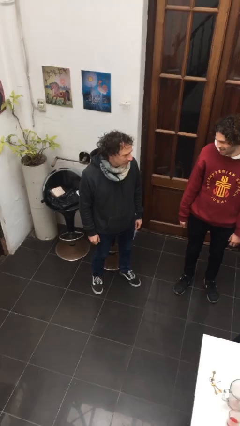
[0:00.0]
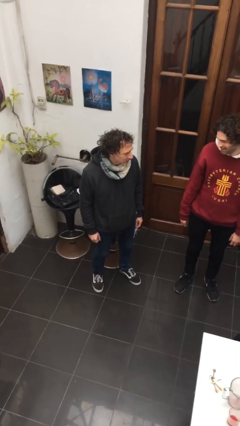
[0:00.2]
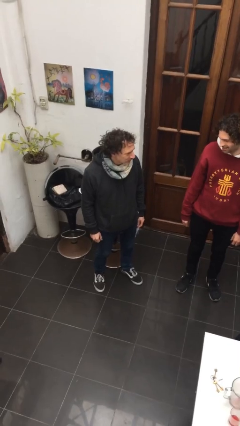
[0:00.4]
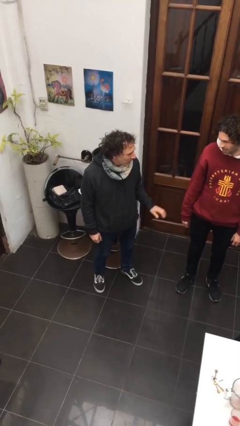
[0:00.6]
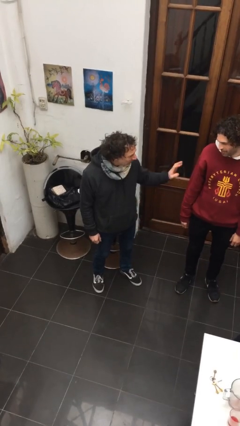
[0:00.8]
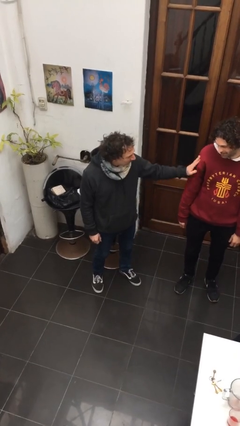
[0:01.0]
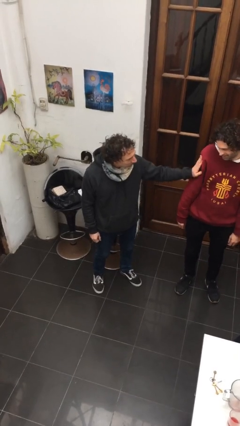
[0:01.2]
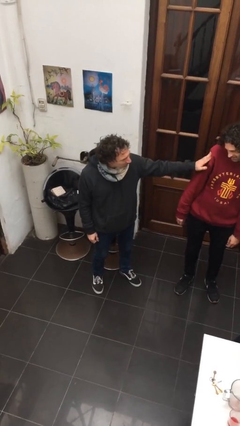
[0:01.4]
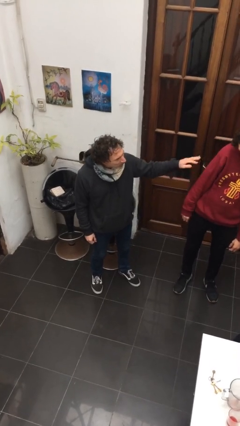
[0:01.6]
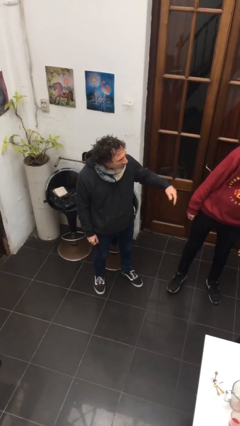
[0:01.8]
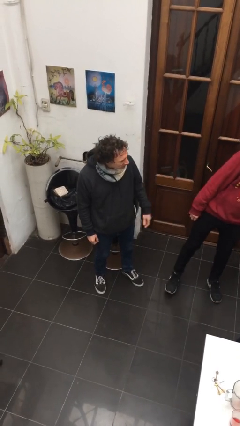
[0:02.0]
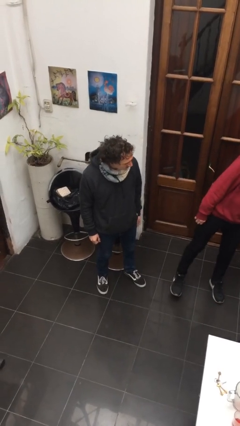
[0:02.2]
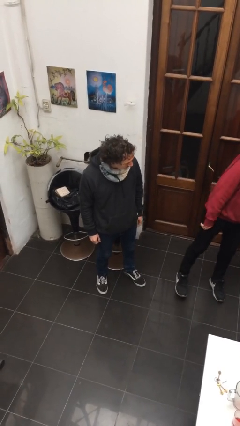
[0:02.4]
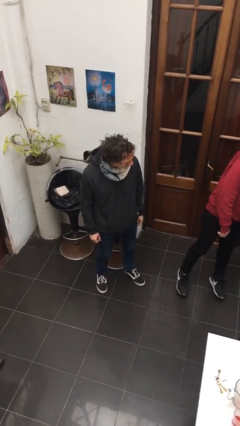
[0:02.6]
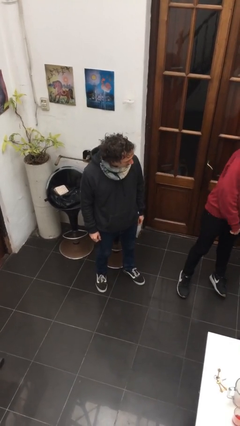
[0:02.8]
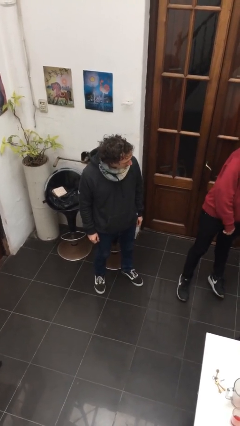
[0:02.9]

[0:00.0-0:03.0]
person shoves person

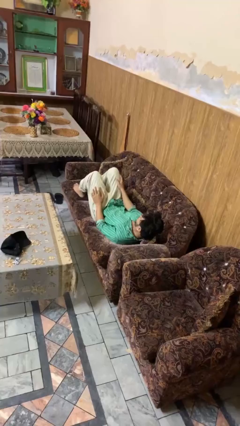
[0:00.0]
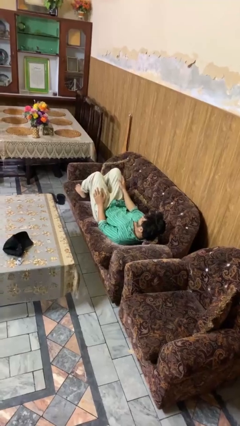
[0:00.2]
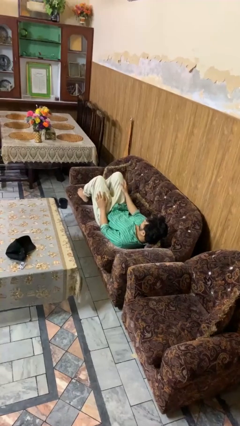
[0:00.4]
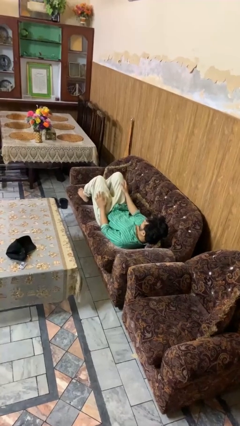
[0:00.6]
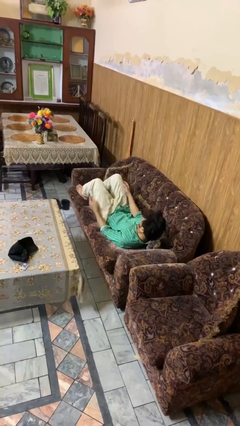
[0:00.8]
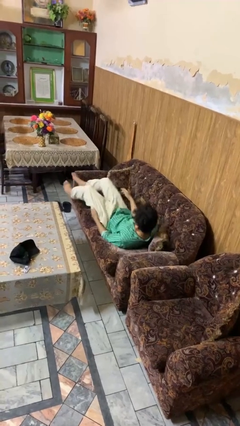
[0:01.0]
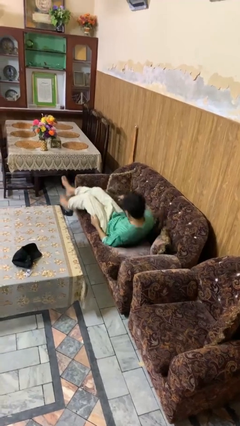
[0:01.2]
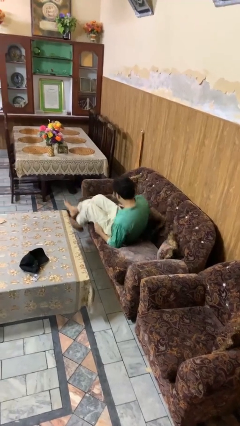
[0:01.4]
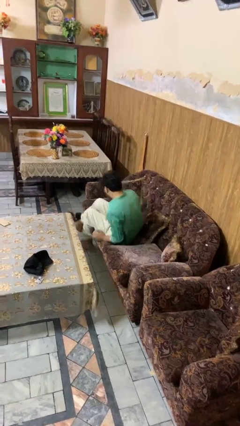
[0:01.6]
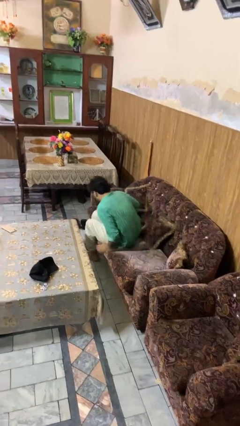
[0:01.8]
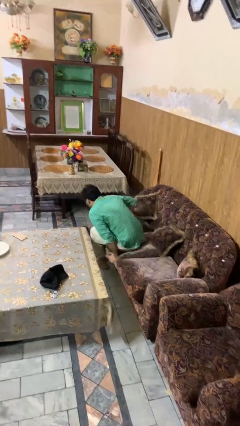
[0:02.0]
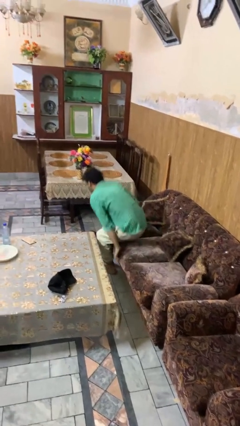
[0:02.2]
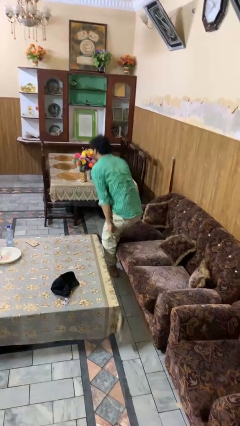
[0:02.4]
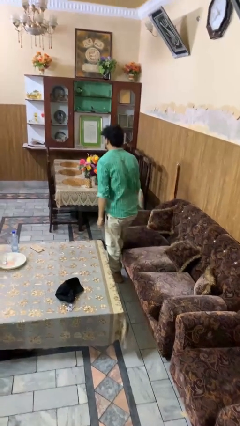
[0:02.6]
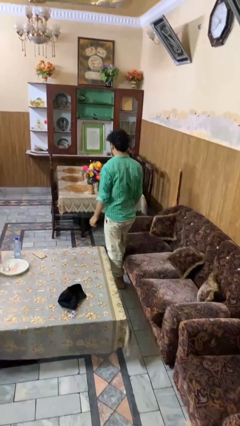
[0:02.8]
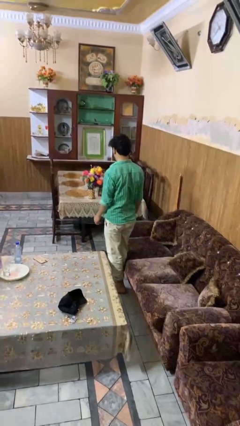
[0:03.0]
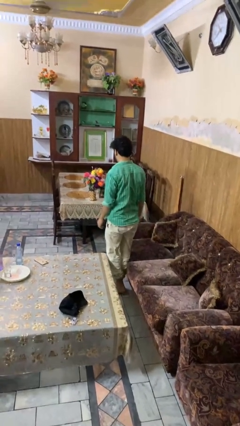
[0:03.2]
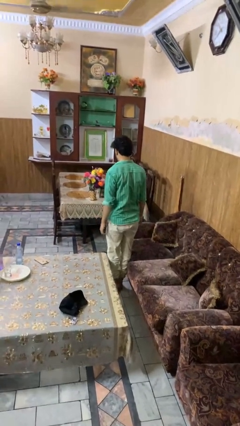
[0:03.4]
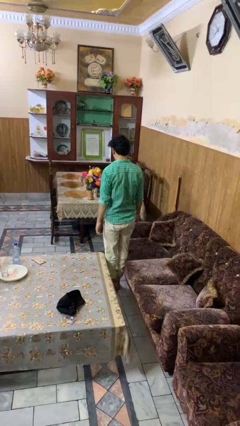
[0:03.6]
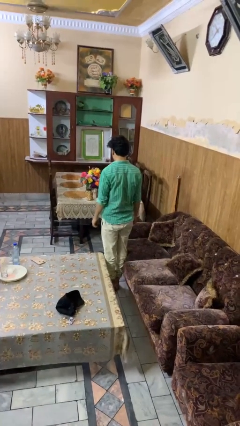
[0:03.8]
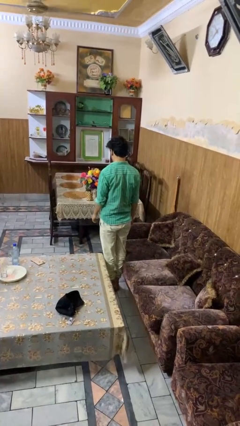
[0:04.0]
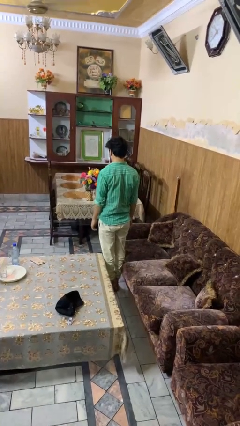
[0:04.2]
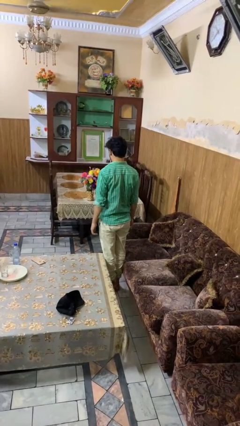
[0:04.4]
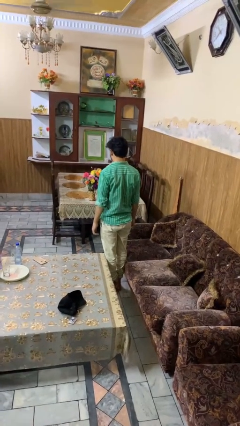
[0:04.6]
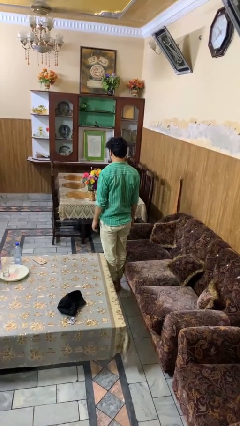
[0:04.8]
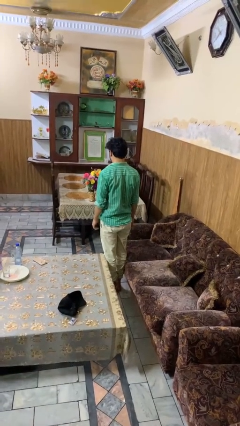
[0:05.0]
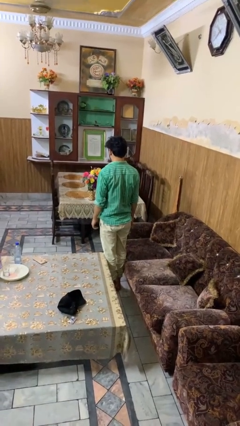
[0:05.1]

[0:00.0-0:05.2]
person stands up

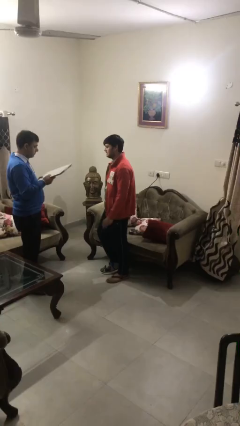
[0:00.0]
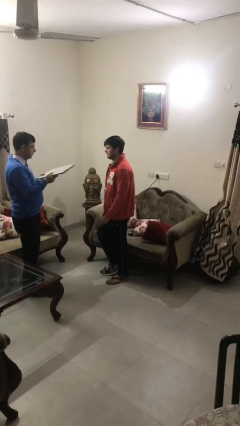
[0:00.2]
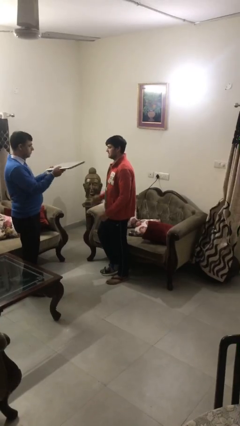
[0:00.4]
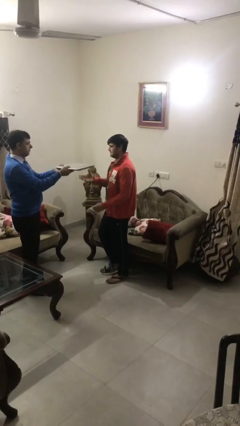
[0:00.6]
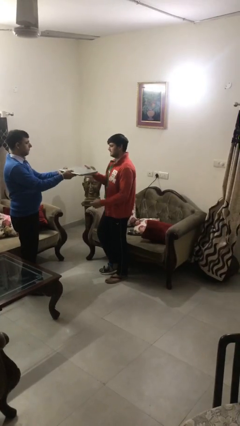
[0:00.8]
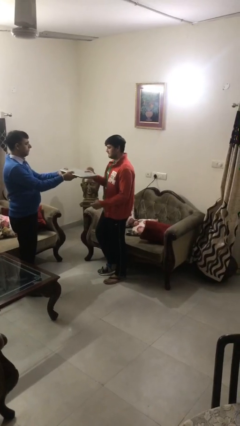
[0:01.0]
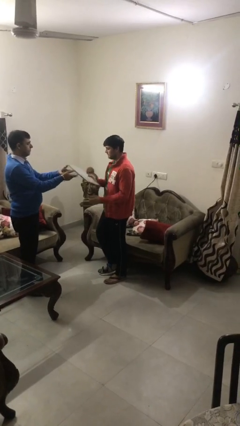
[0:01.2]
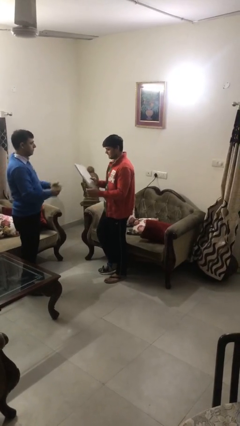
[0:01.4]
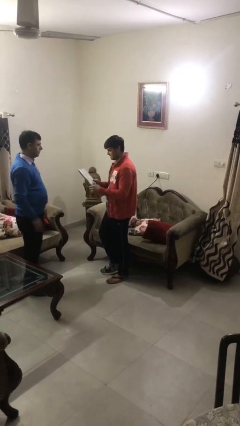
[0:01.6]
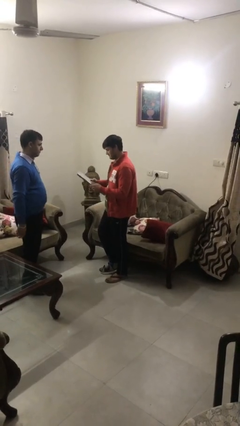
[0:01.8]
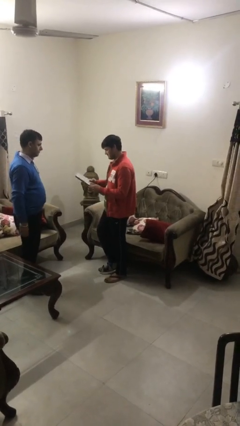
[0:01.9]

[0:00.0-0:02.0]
person transfers object to person

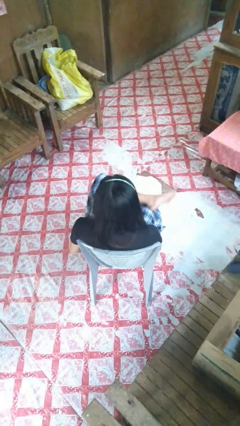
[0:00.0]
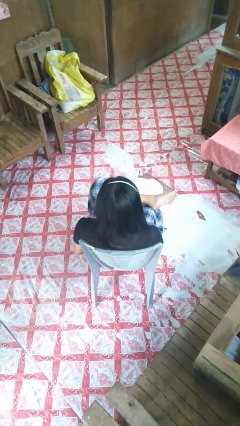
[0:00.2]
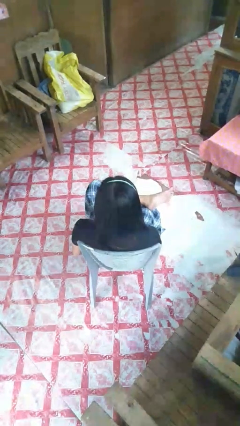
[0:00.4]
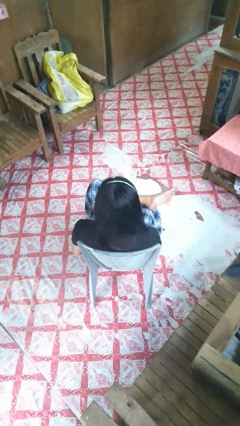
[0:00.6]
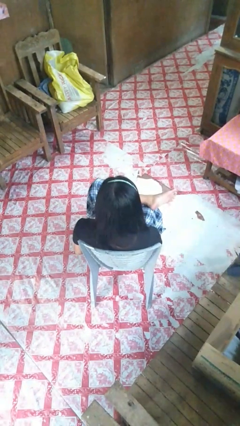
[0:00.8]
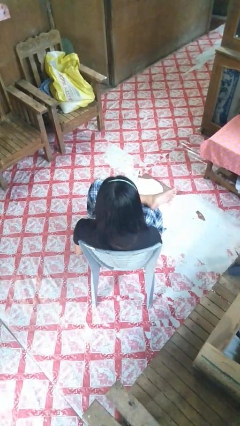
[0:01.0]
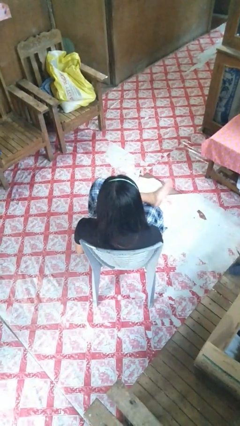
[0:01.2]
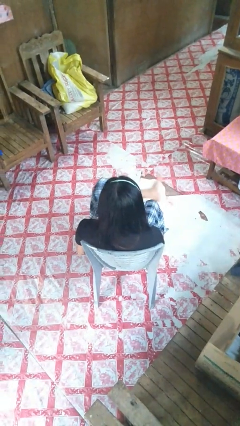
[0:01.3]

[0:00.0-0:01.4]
person crosses legs

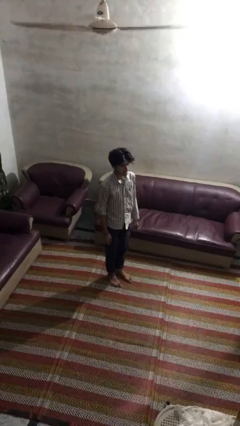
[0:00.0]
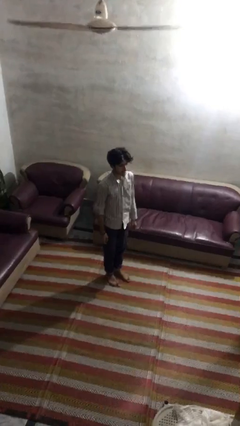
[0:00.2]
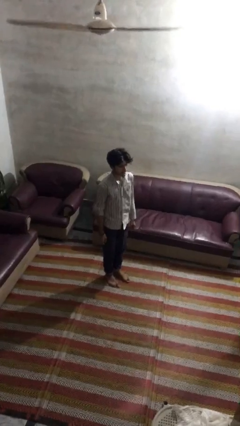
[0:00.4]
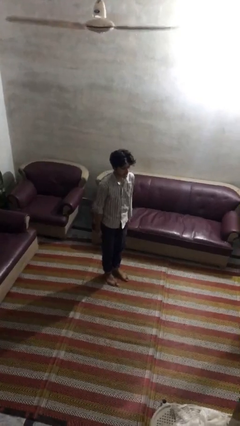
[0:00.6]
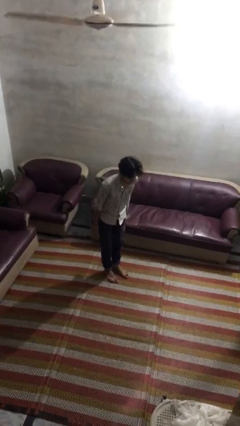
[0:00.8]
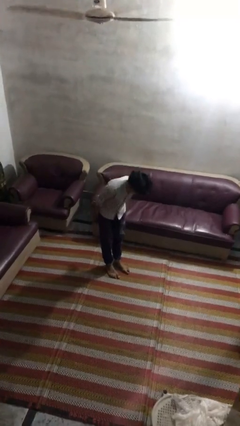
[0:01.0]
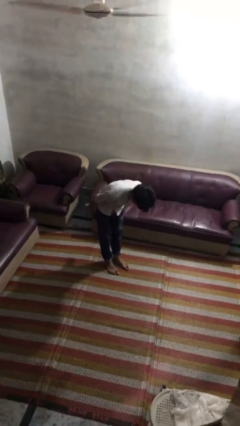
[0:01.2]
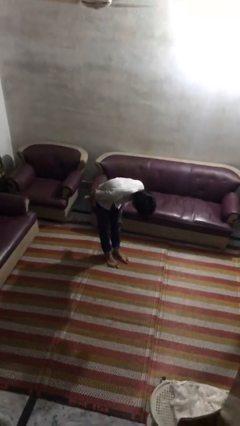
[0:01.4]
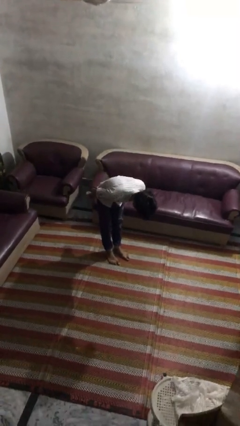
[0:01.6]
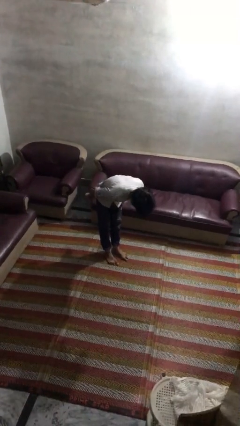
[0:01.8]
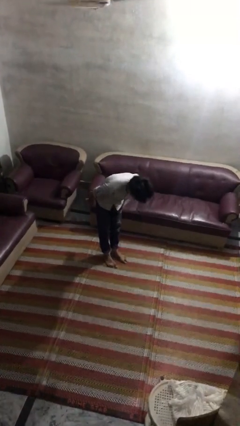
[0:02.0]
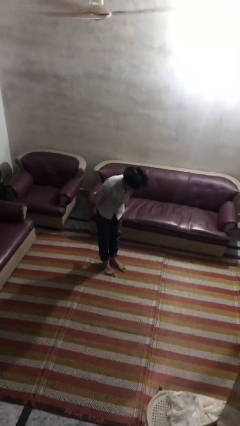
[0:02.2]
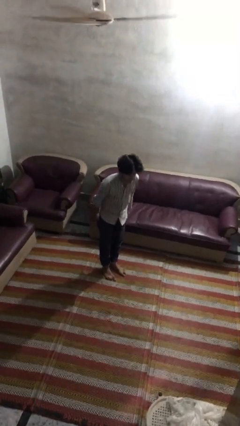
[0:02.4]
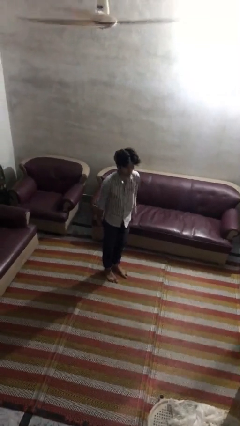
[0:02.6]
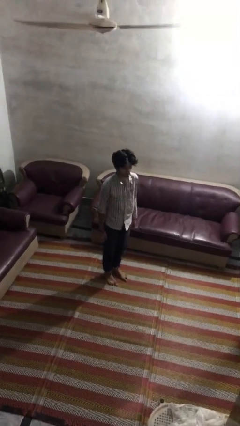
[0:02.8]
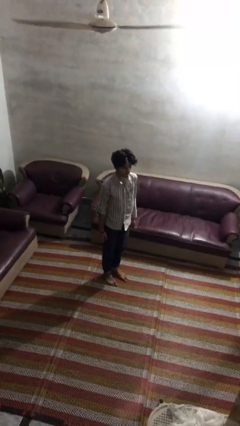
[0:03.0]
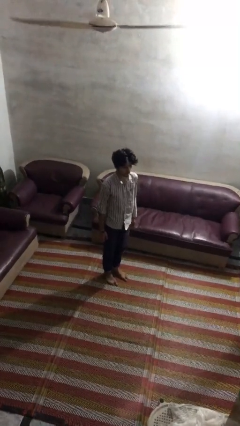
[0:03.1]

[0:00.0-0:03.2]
person bows

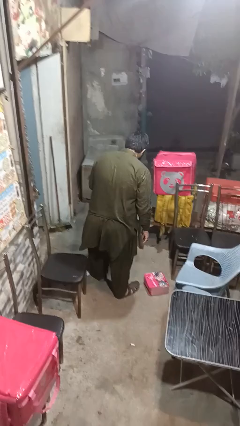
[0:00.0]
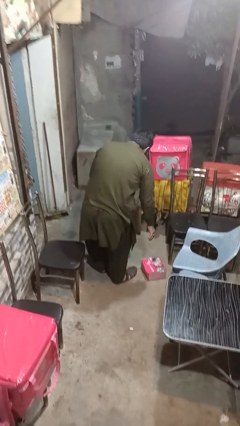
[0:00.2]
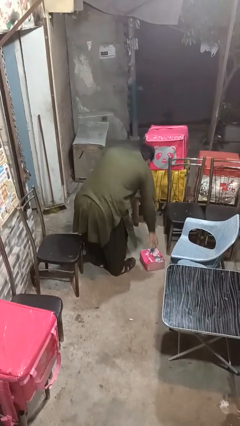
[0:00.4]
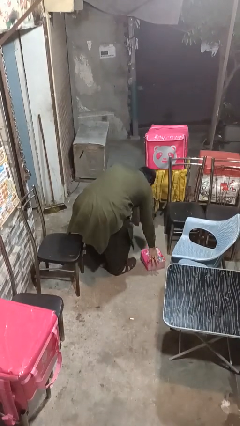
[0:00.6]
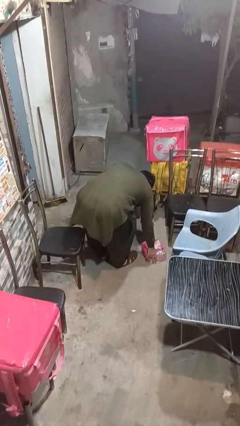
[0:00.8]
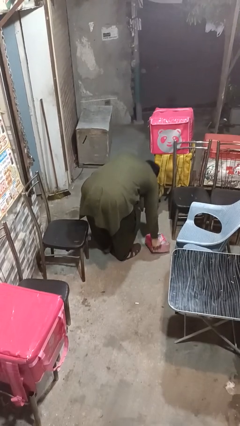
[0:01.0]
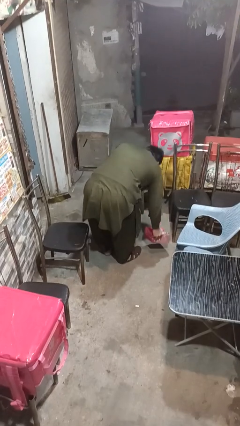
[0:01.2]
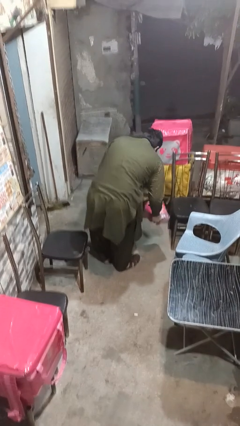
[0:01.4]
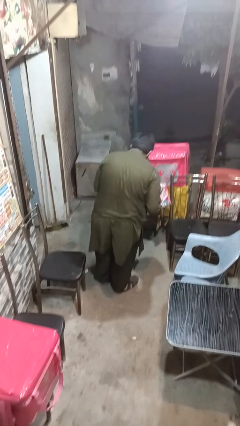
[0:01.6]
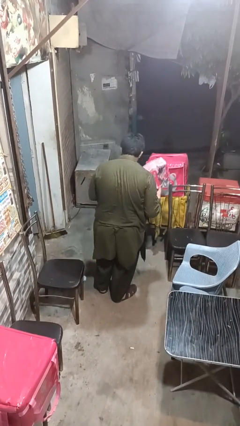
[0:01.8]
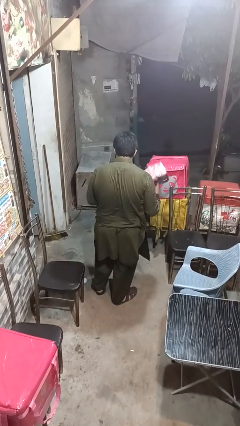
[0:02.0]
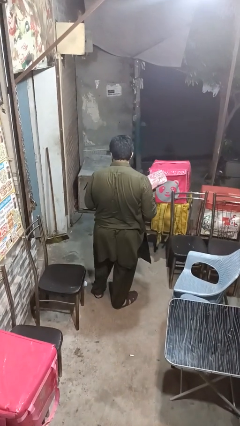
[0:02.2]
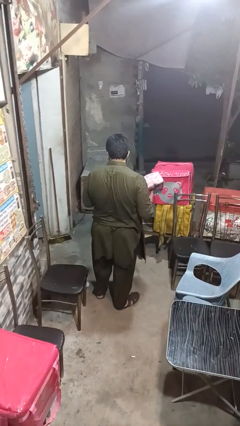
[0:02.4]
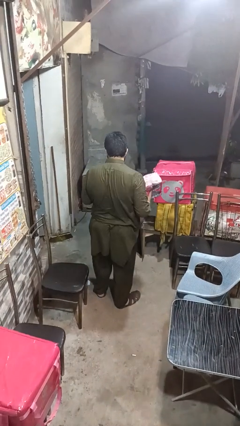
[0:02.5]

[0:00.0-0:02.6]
person picks up object from floor

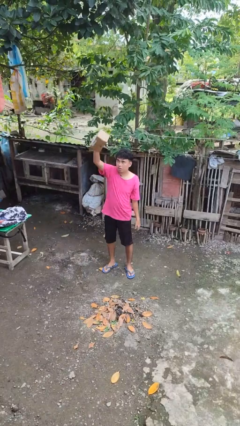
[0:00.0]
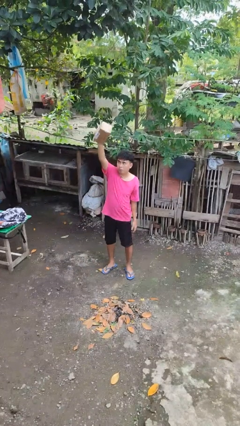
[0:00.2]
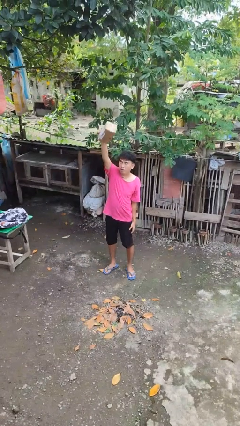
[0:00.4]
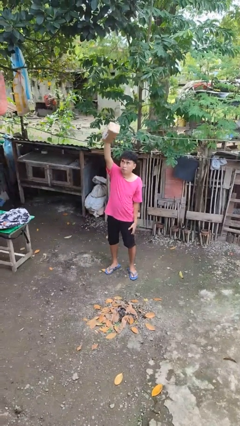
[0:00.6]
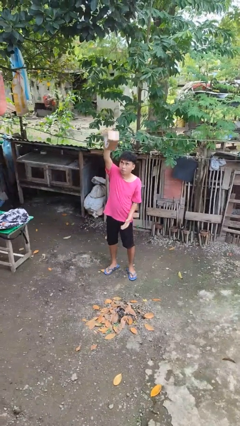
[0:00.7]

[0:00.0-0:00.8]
person drops object
